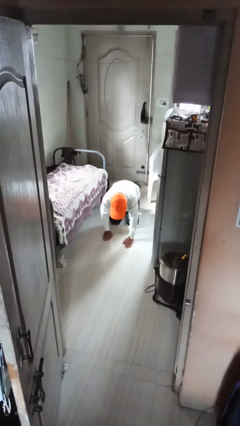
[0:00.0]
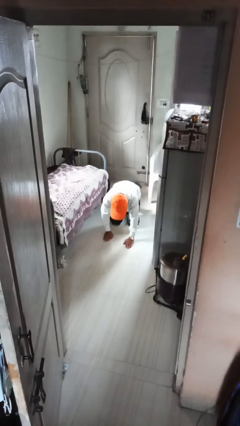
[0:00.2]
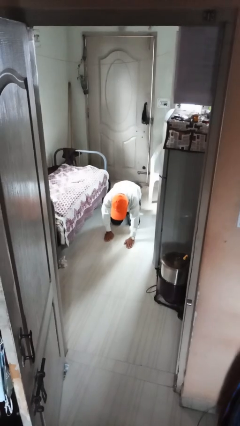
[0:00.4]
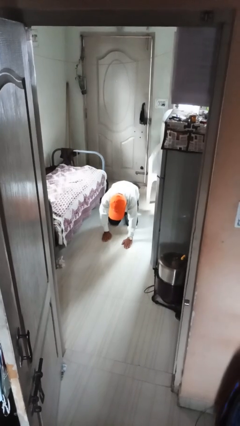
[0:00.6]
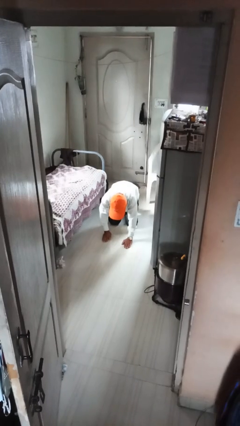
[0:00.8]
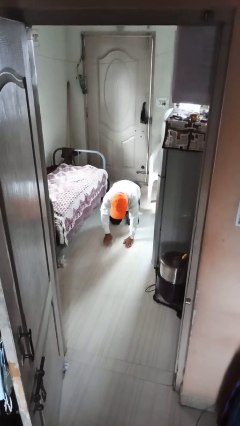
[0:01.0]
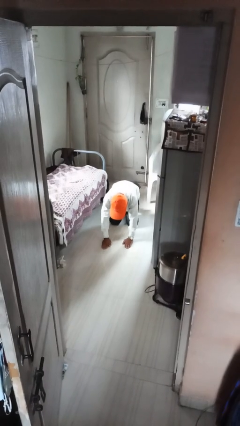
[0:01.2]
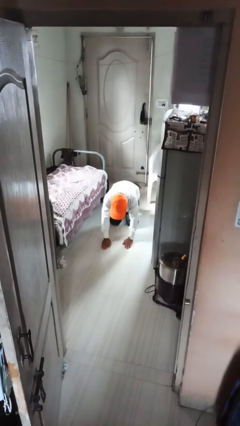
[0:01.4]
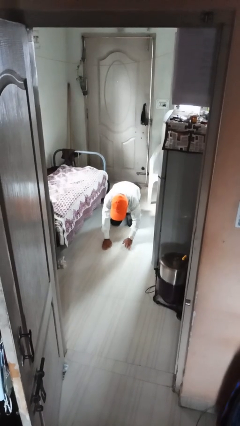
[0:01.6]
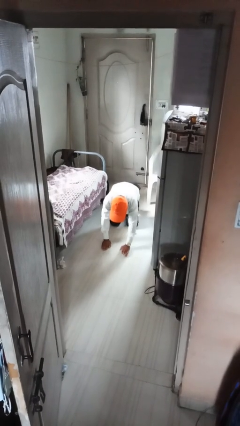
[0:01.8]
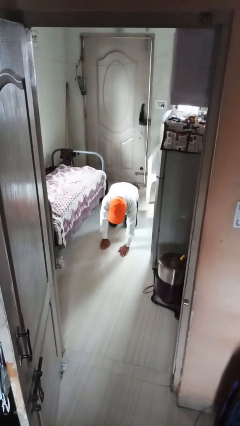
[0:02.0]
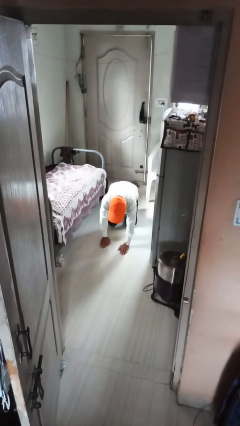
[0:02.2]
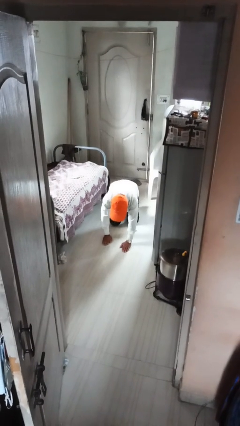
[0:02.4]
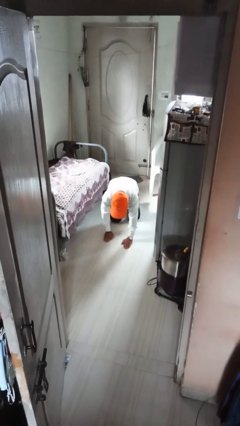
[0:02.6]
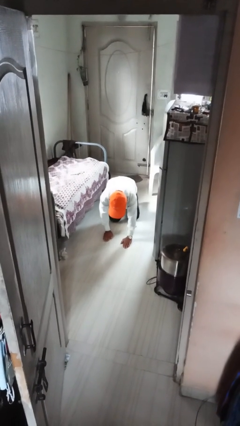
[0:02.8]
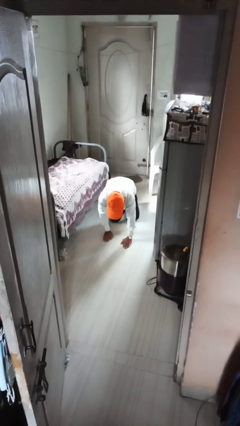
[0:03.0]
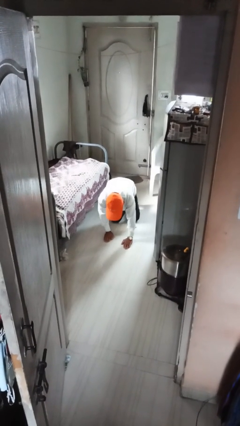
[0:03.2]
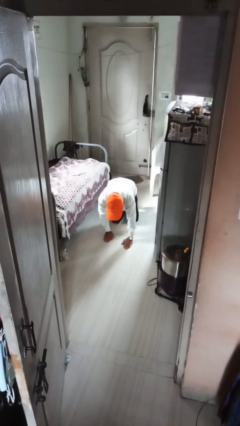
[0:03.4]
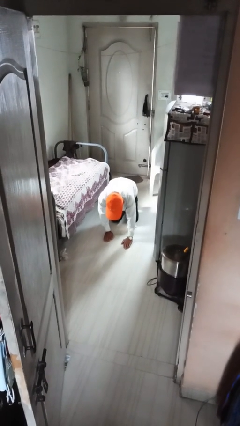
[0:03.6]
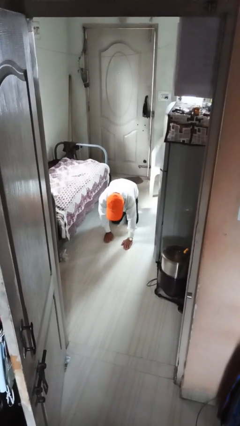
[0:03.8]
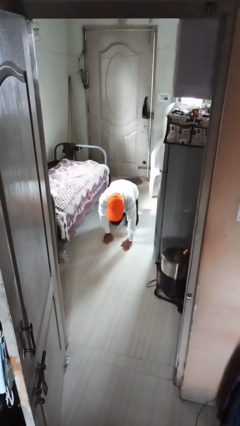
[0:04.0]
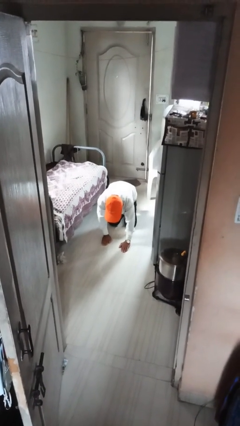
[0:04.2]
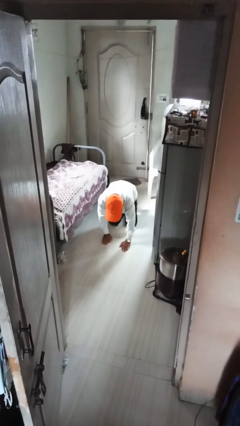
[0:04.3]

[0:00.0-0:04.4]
person crawls

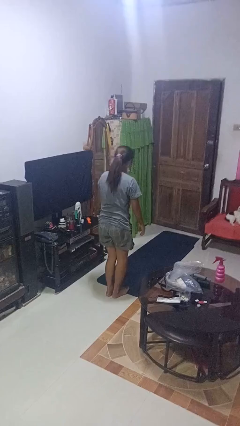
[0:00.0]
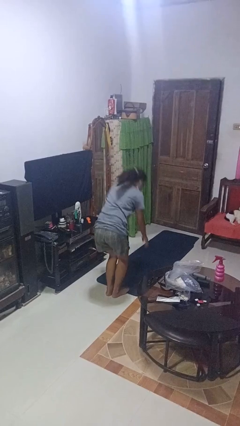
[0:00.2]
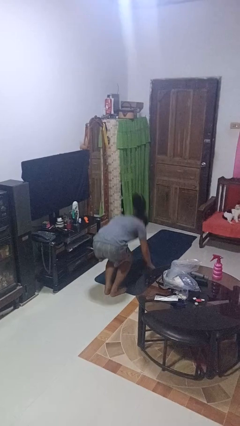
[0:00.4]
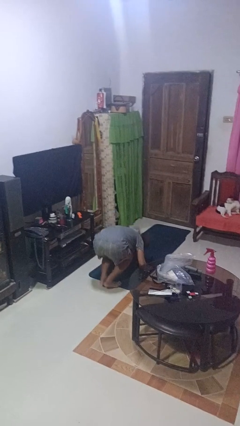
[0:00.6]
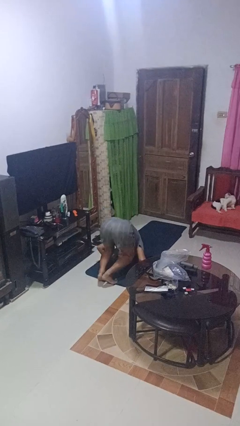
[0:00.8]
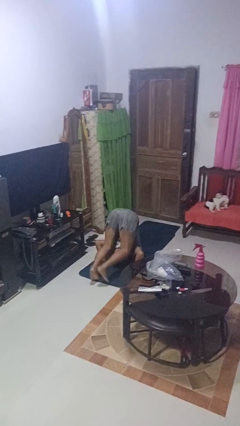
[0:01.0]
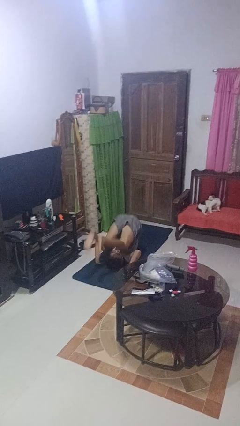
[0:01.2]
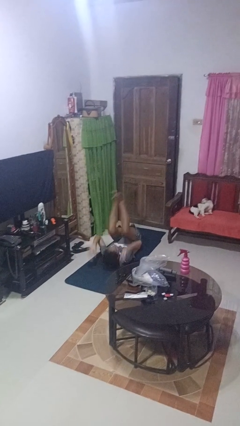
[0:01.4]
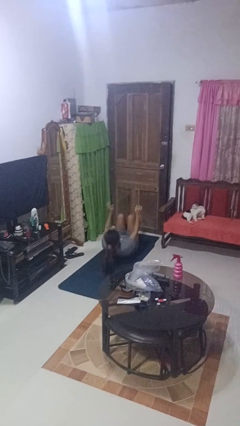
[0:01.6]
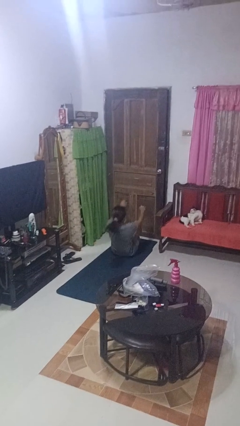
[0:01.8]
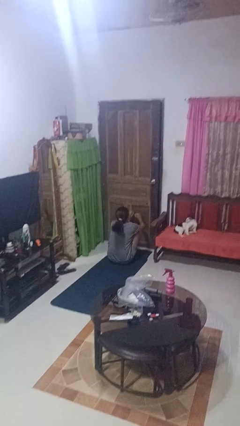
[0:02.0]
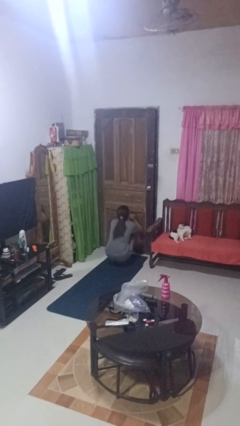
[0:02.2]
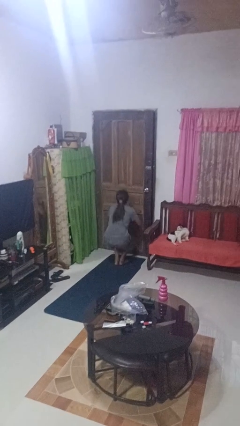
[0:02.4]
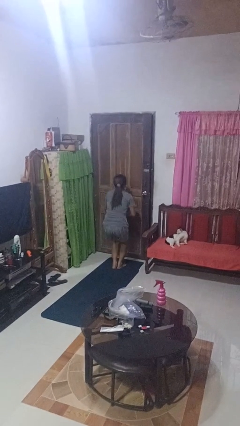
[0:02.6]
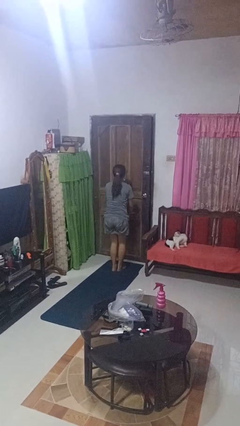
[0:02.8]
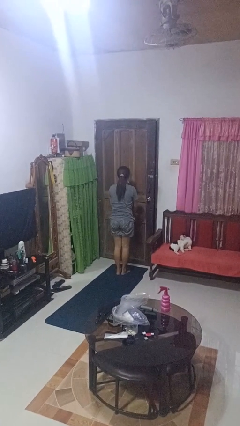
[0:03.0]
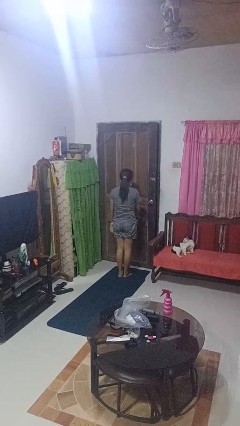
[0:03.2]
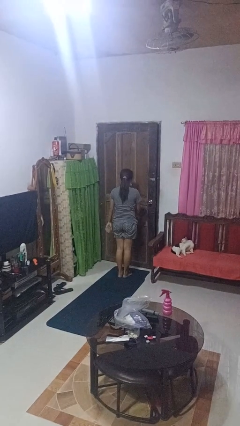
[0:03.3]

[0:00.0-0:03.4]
person somersaults

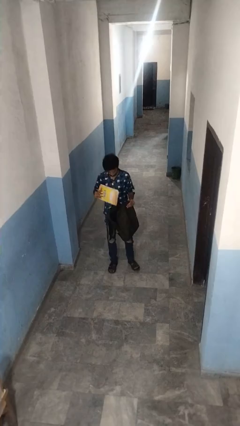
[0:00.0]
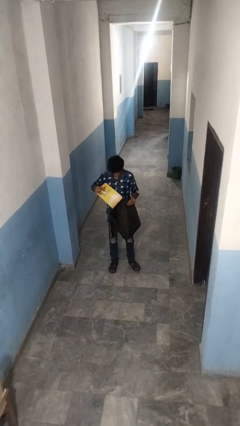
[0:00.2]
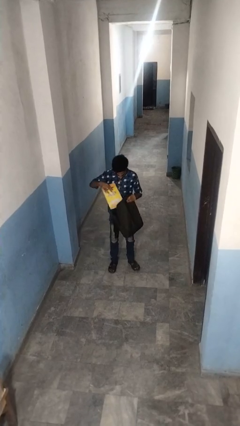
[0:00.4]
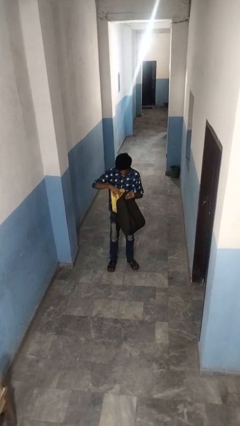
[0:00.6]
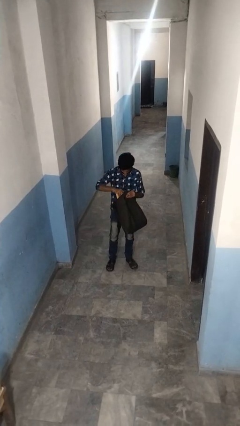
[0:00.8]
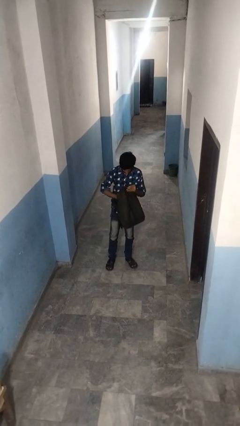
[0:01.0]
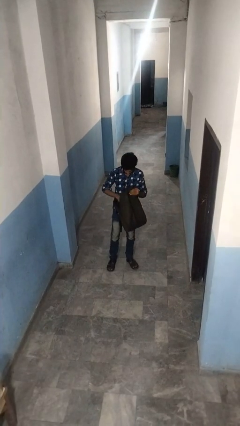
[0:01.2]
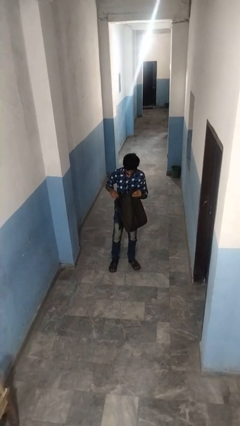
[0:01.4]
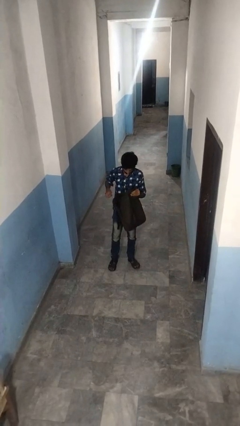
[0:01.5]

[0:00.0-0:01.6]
person puts object into backpack

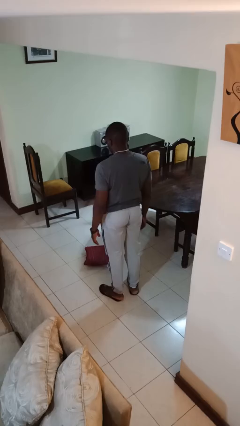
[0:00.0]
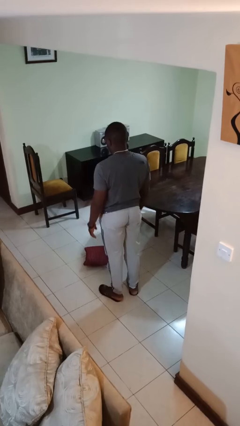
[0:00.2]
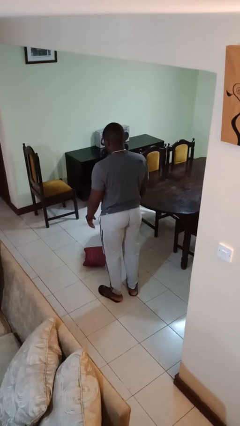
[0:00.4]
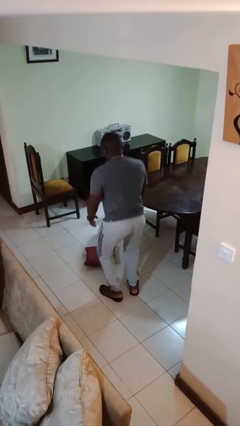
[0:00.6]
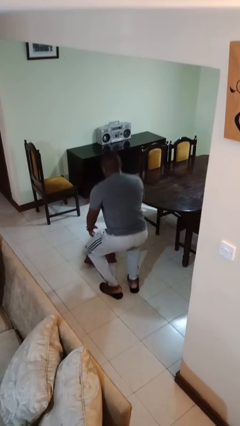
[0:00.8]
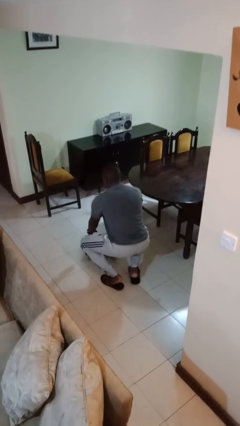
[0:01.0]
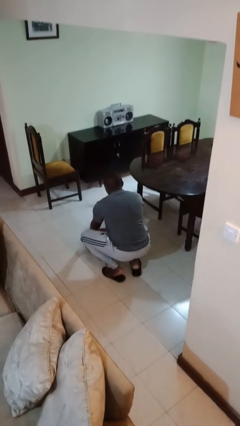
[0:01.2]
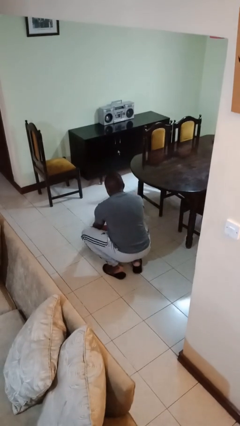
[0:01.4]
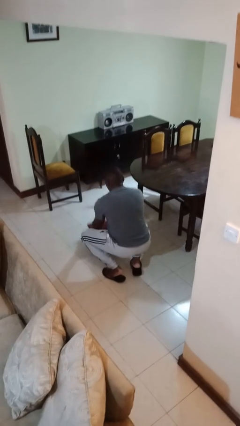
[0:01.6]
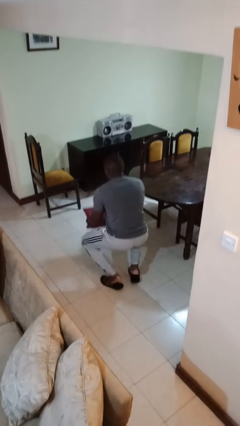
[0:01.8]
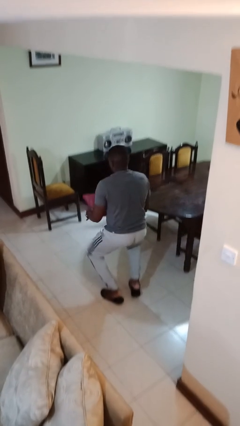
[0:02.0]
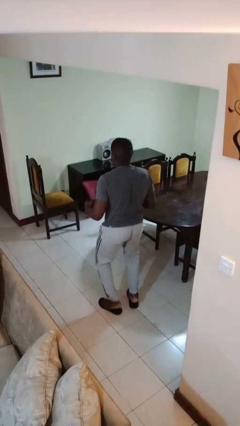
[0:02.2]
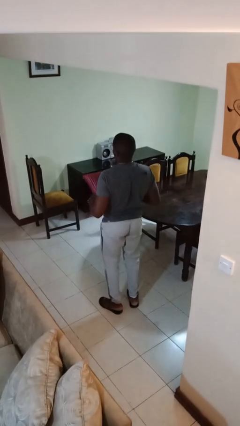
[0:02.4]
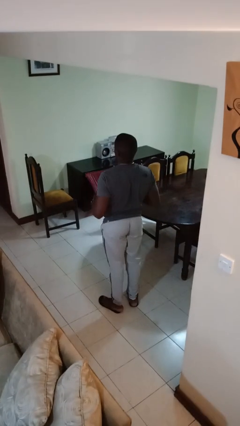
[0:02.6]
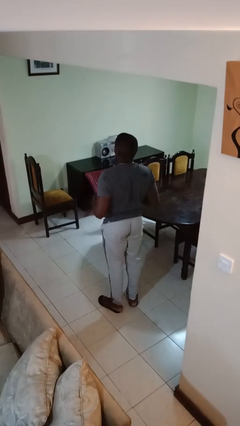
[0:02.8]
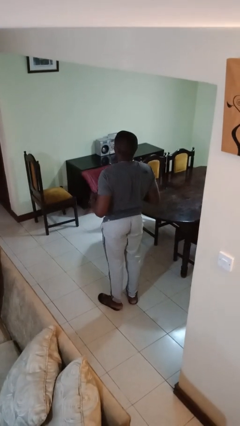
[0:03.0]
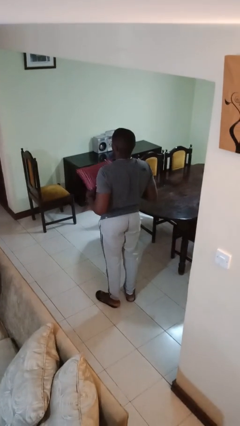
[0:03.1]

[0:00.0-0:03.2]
person picks up object from floor

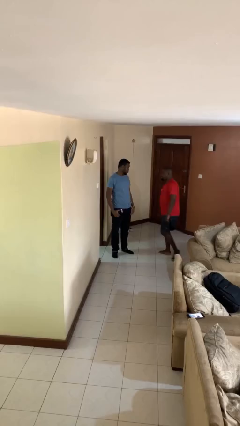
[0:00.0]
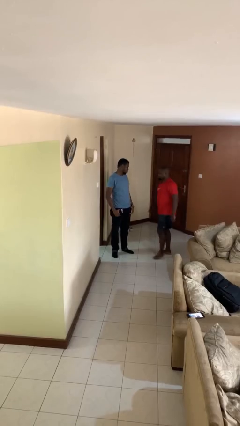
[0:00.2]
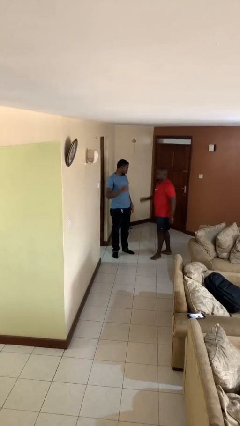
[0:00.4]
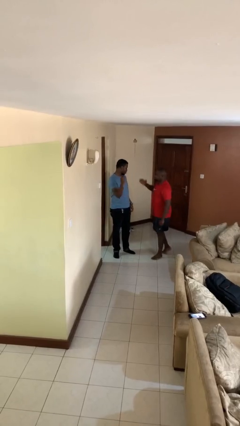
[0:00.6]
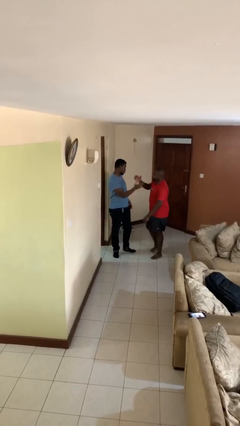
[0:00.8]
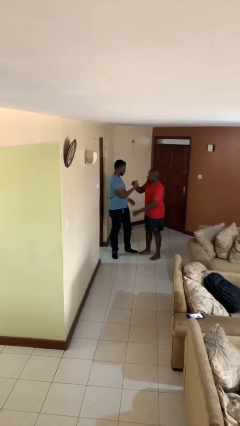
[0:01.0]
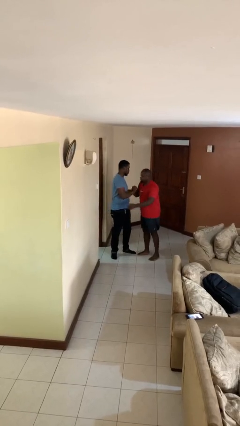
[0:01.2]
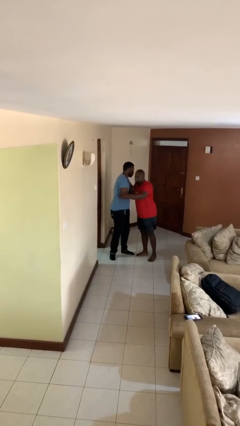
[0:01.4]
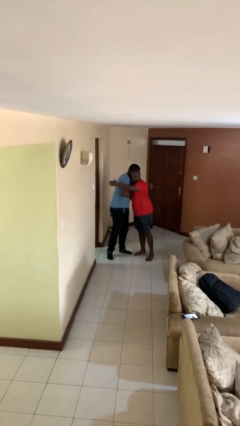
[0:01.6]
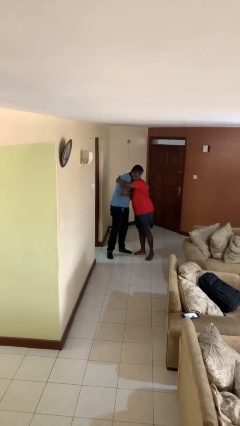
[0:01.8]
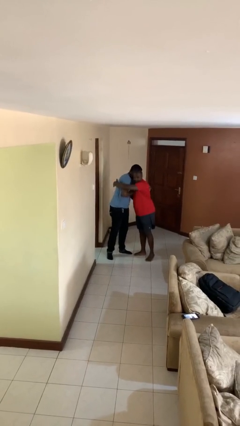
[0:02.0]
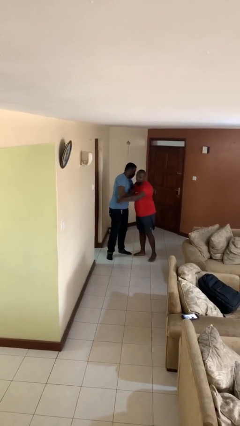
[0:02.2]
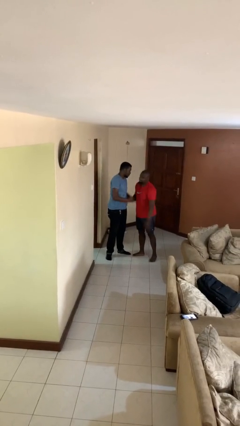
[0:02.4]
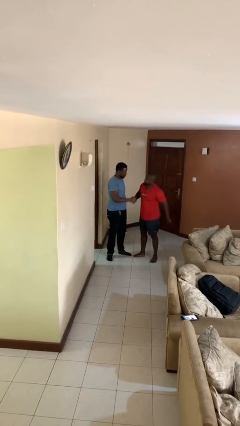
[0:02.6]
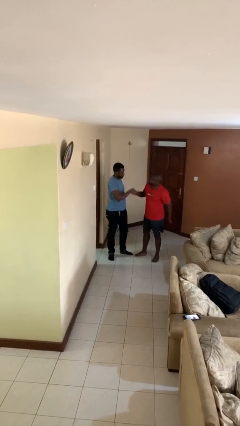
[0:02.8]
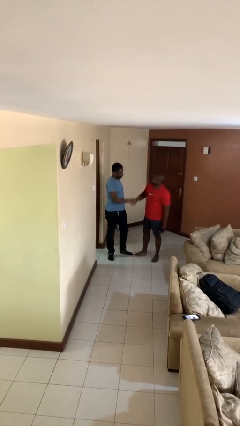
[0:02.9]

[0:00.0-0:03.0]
person embraces person

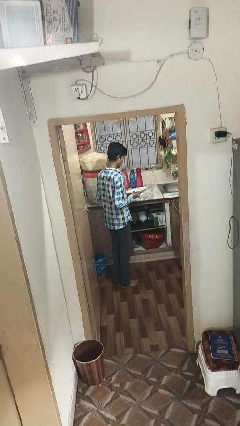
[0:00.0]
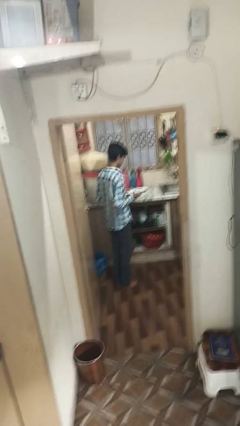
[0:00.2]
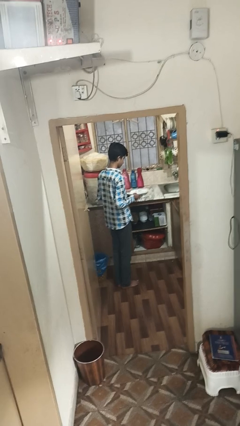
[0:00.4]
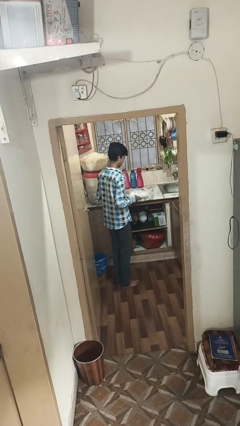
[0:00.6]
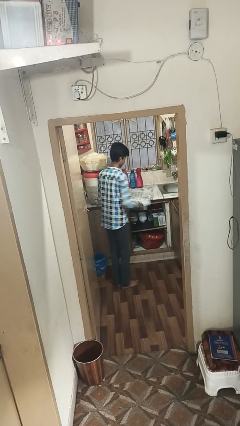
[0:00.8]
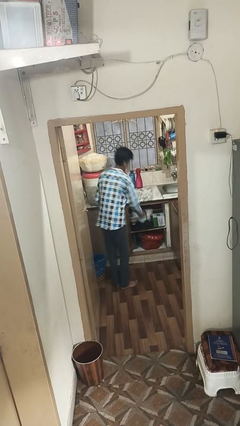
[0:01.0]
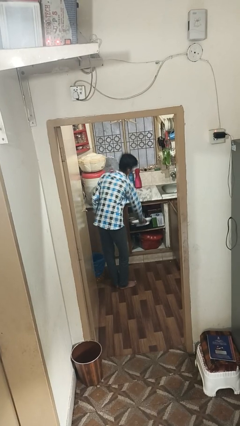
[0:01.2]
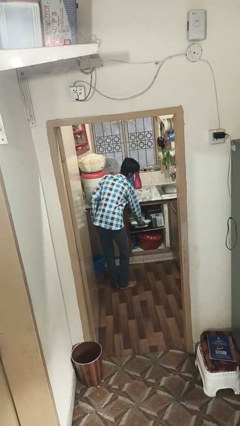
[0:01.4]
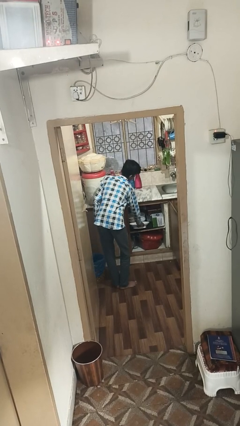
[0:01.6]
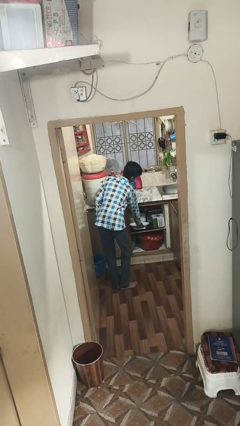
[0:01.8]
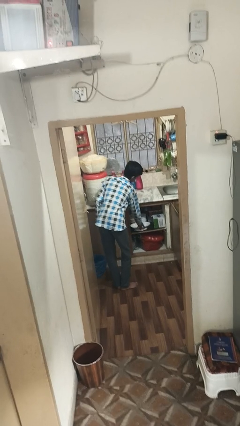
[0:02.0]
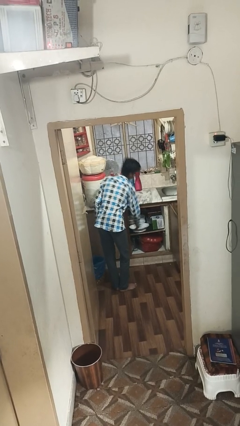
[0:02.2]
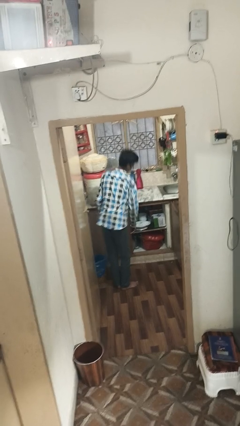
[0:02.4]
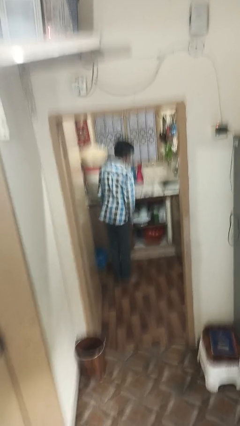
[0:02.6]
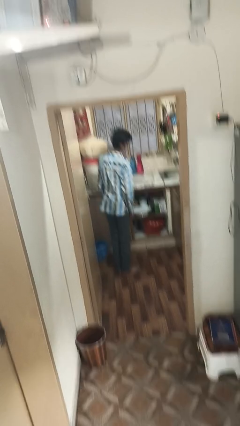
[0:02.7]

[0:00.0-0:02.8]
person puts down object into cabinet
